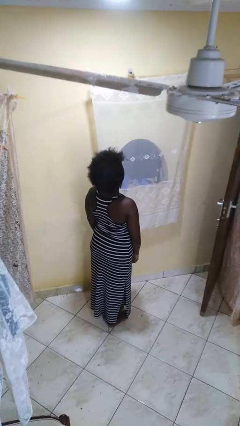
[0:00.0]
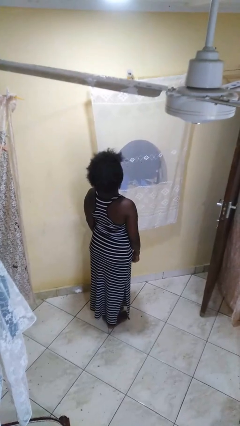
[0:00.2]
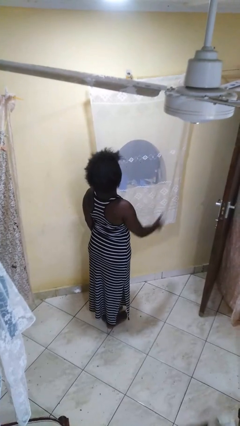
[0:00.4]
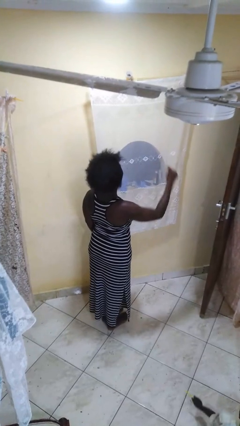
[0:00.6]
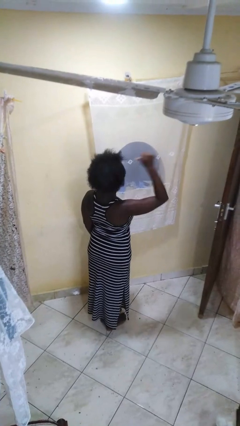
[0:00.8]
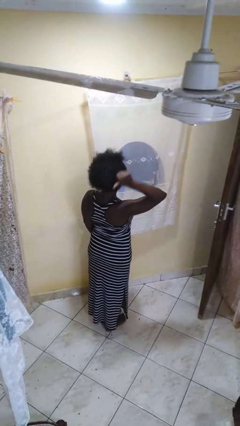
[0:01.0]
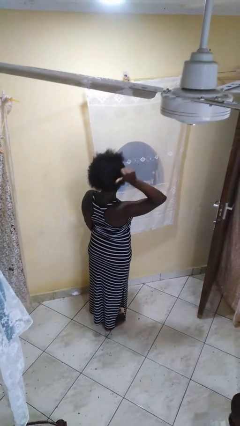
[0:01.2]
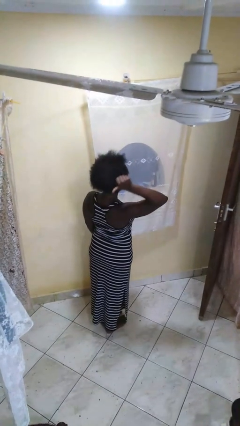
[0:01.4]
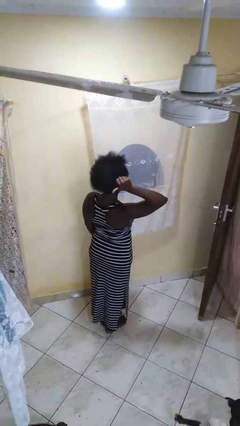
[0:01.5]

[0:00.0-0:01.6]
person gestures behind me

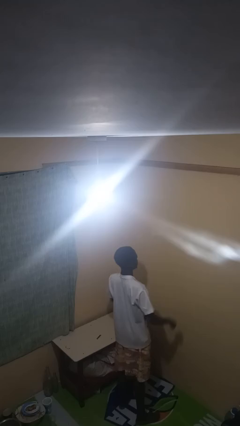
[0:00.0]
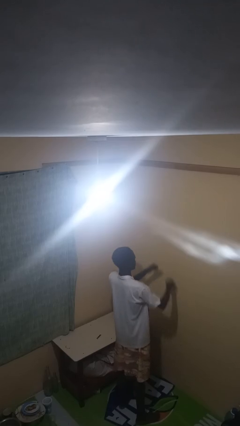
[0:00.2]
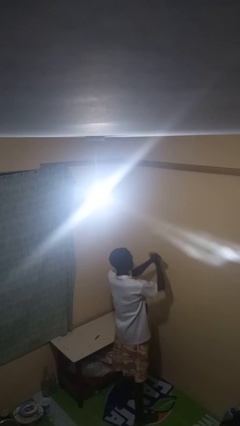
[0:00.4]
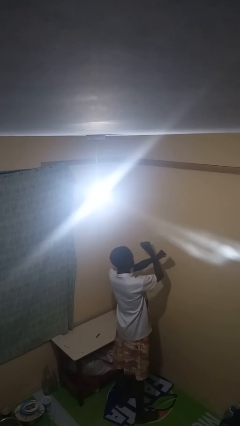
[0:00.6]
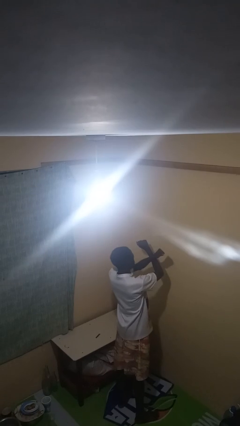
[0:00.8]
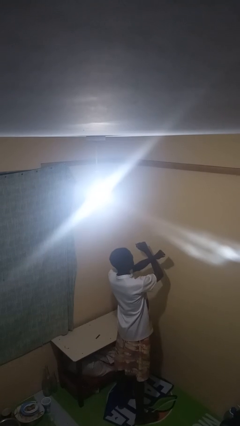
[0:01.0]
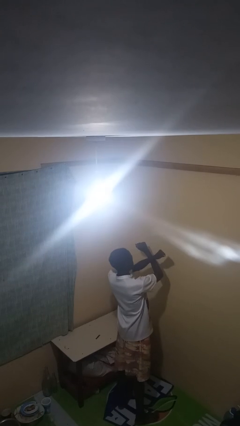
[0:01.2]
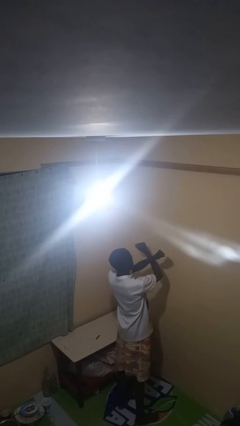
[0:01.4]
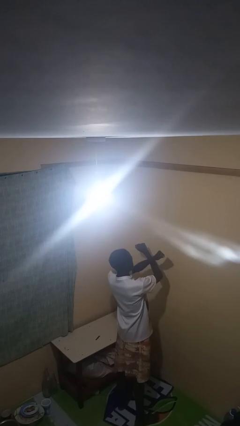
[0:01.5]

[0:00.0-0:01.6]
person gestures arms x

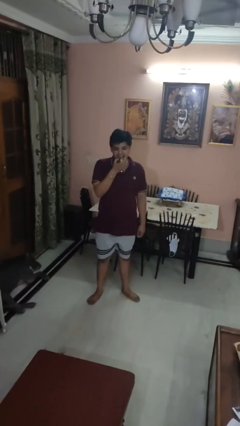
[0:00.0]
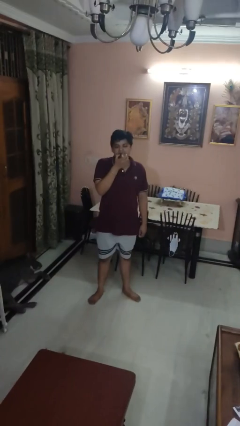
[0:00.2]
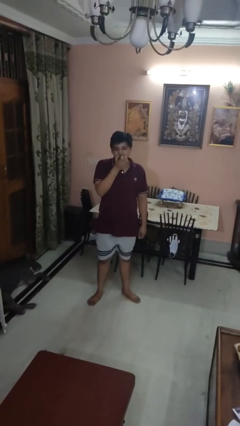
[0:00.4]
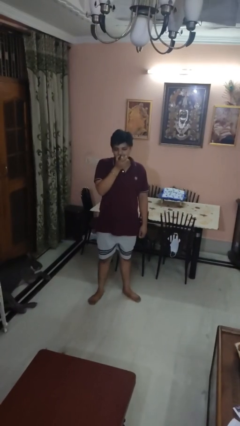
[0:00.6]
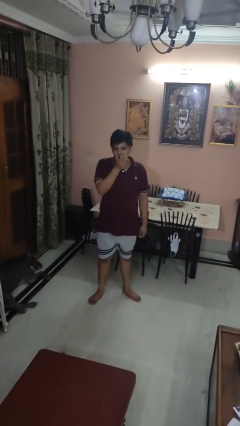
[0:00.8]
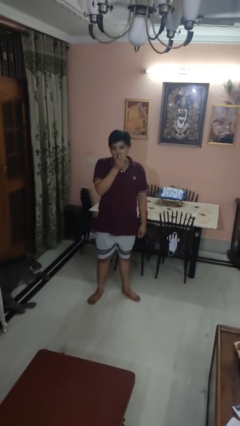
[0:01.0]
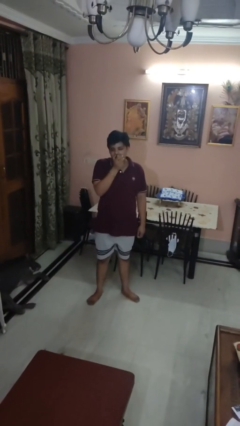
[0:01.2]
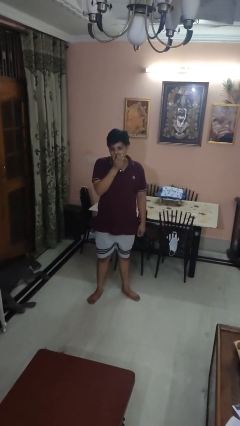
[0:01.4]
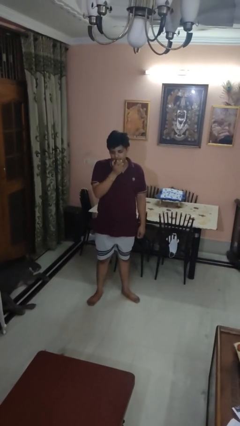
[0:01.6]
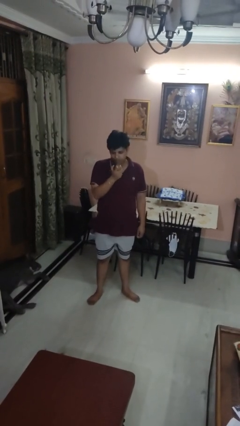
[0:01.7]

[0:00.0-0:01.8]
person eats apple

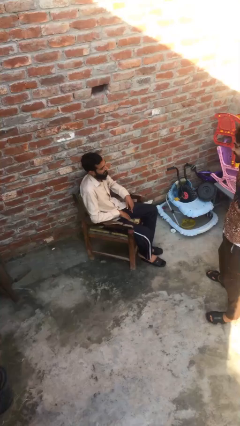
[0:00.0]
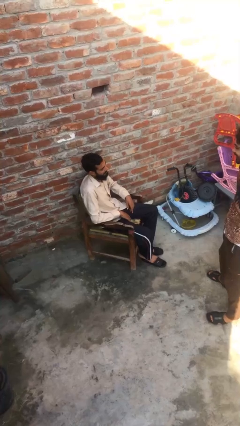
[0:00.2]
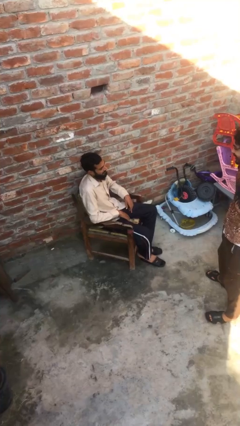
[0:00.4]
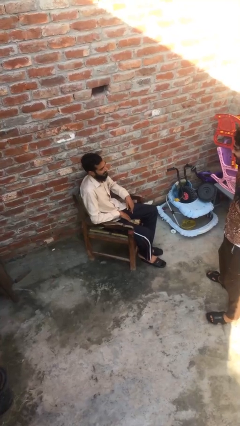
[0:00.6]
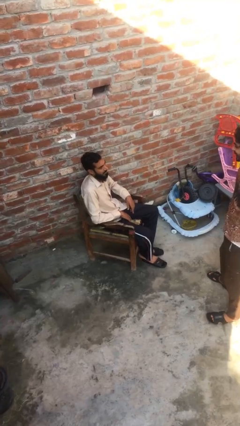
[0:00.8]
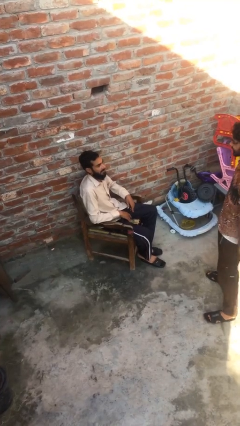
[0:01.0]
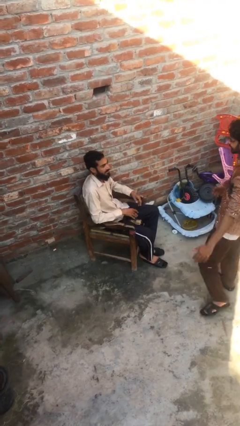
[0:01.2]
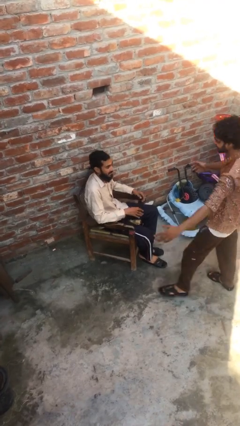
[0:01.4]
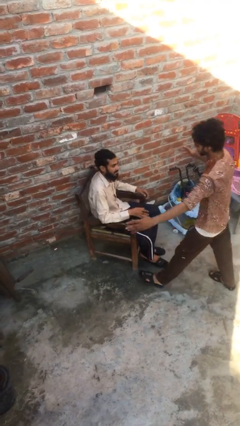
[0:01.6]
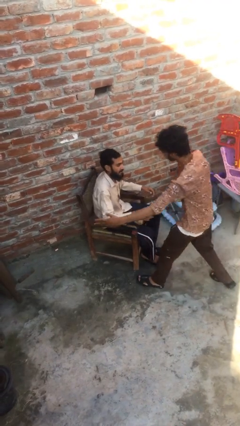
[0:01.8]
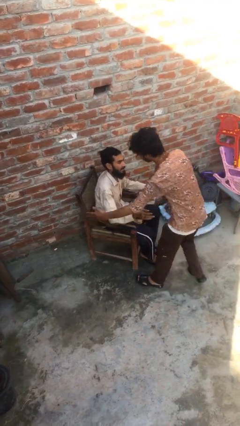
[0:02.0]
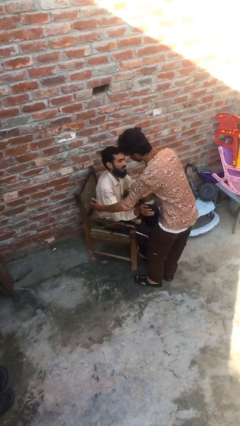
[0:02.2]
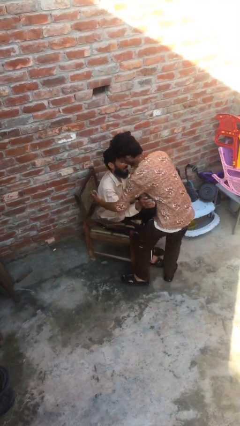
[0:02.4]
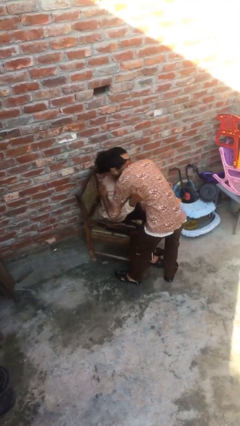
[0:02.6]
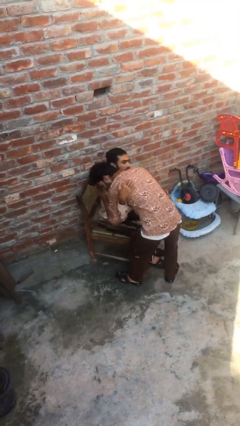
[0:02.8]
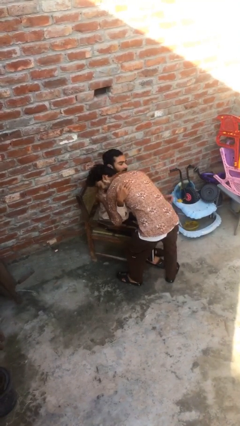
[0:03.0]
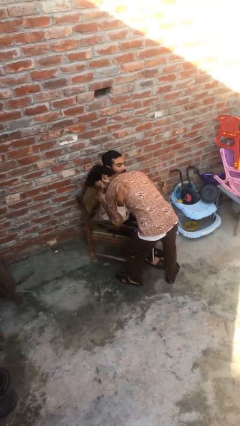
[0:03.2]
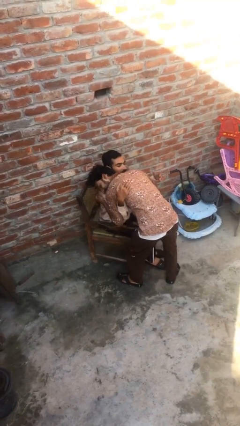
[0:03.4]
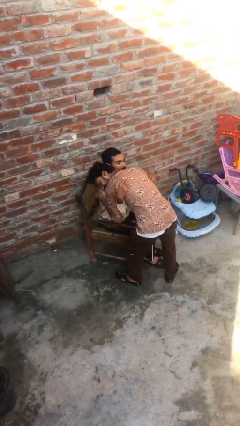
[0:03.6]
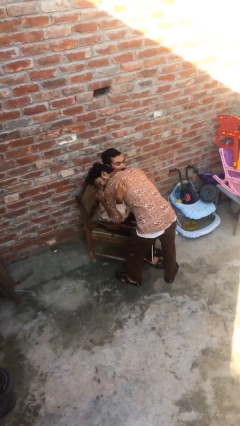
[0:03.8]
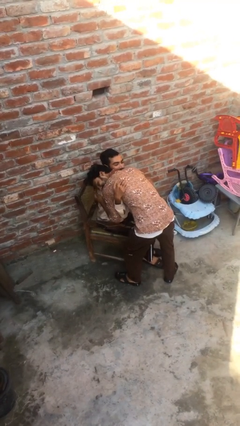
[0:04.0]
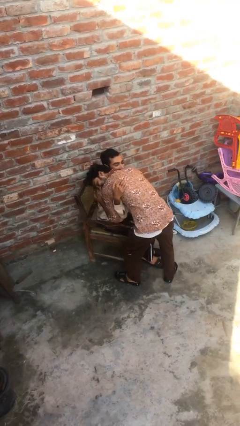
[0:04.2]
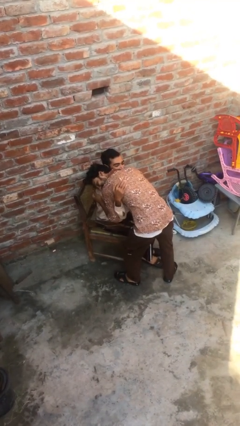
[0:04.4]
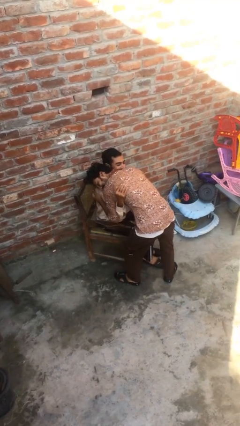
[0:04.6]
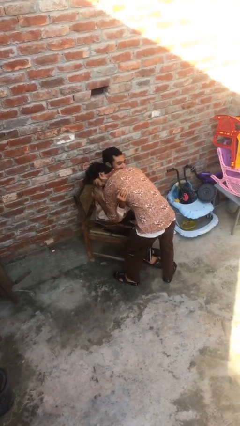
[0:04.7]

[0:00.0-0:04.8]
person embraces person

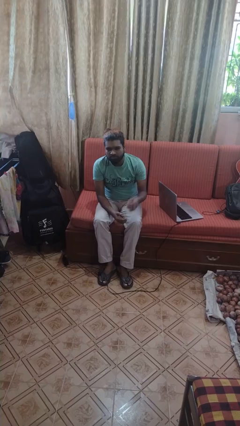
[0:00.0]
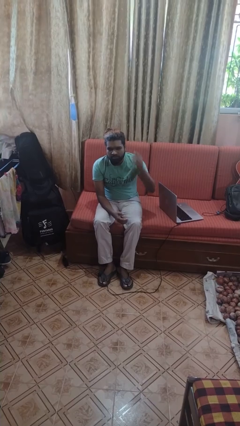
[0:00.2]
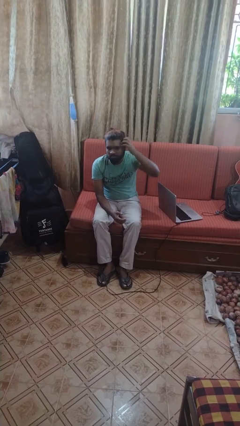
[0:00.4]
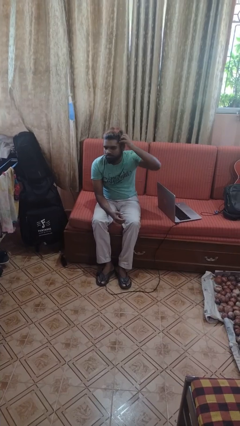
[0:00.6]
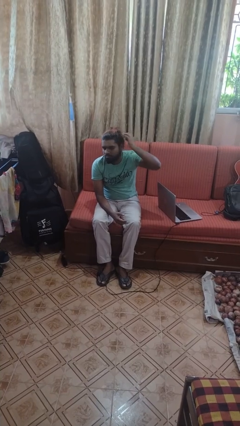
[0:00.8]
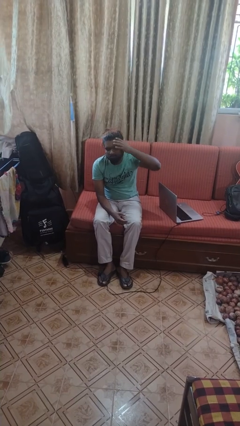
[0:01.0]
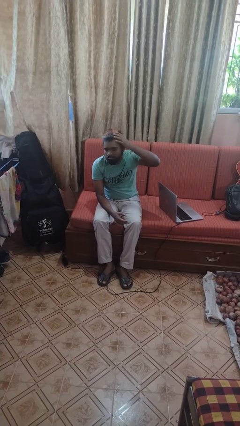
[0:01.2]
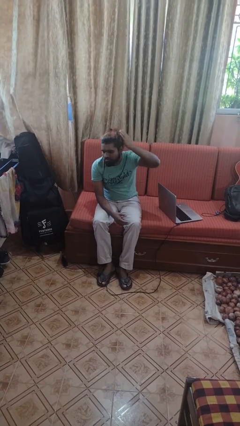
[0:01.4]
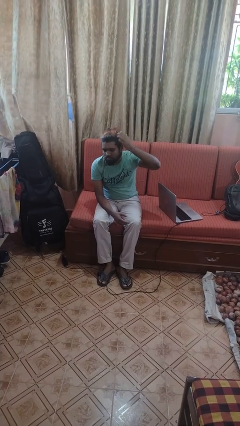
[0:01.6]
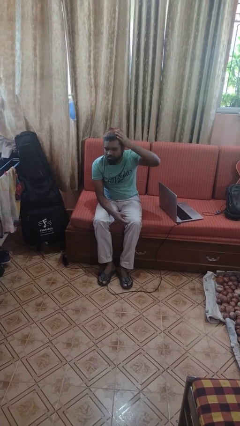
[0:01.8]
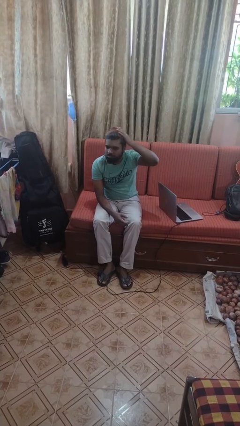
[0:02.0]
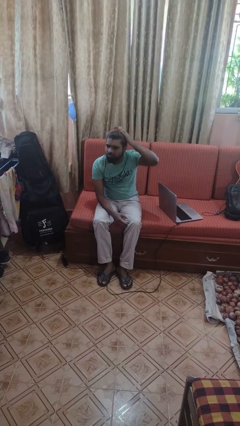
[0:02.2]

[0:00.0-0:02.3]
person strokes hair

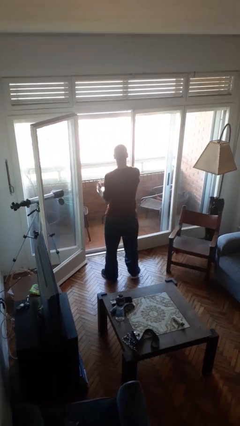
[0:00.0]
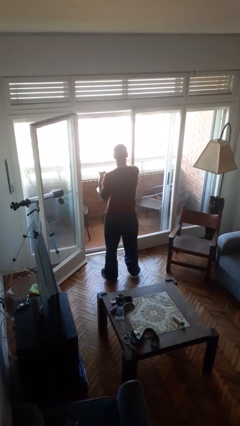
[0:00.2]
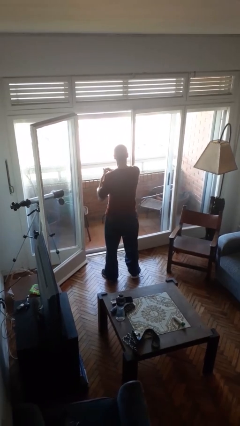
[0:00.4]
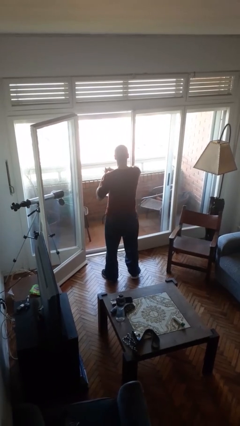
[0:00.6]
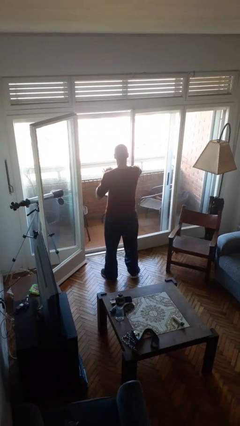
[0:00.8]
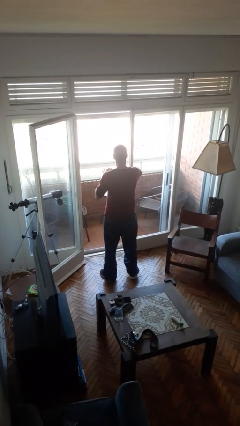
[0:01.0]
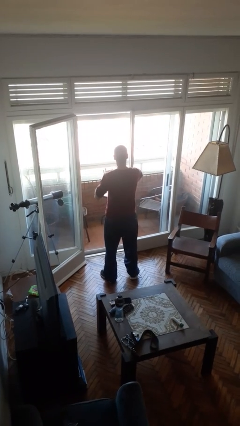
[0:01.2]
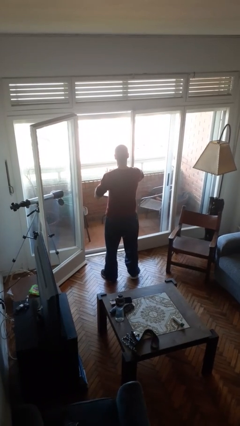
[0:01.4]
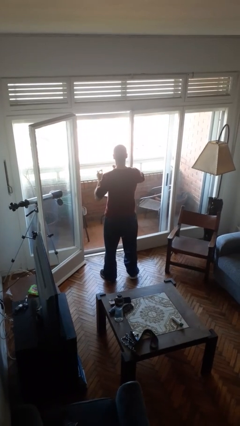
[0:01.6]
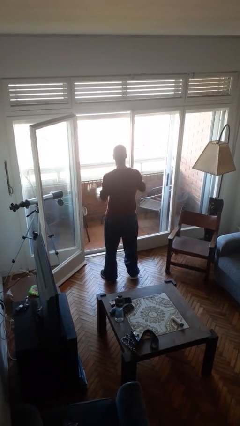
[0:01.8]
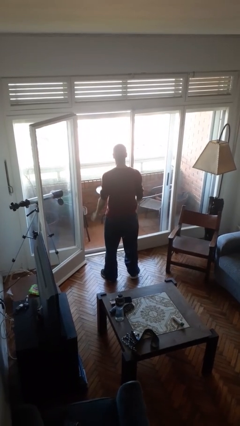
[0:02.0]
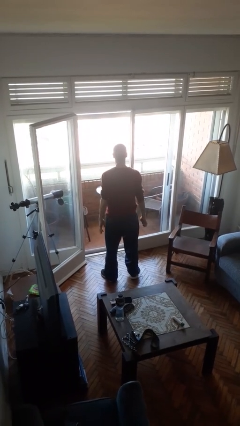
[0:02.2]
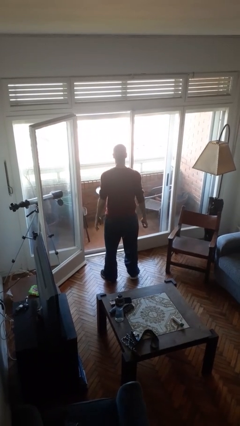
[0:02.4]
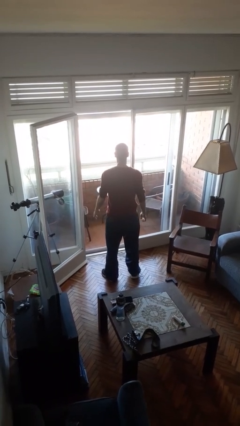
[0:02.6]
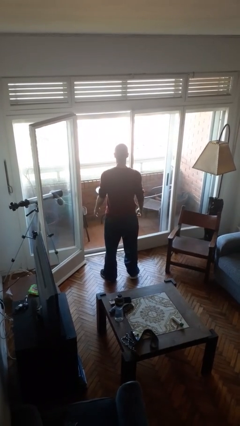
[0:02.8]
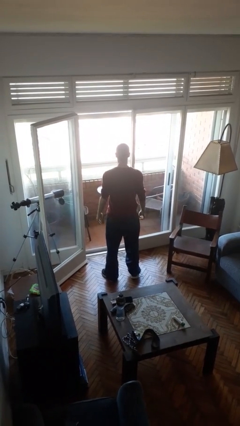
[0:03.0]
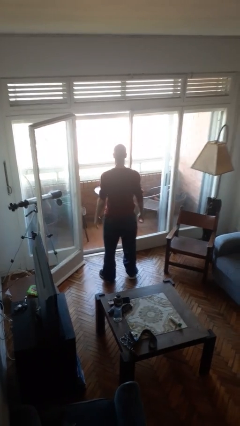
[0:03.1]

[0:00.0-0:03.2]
person takes off ring

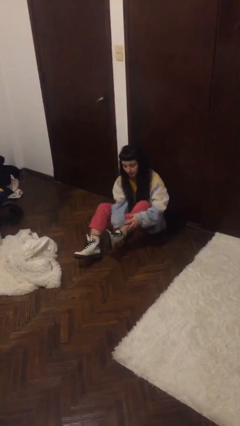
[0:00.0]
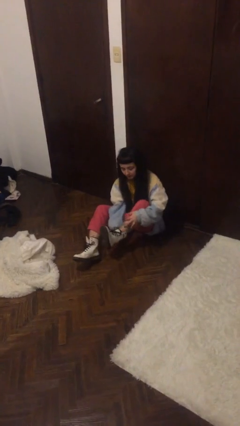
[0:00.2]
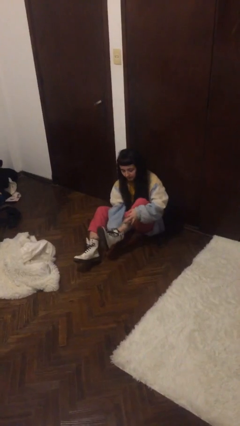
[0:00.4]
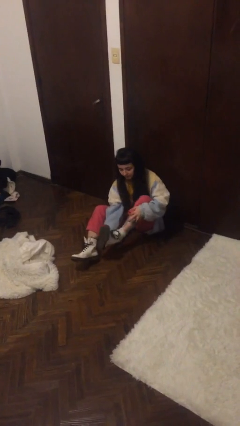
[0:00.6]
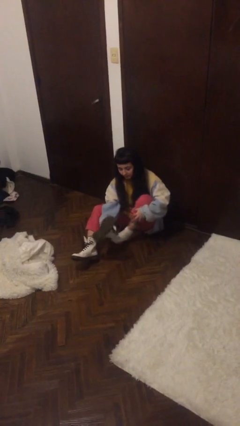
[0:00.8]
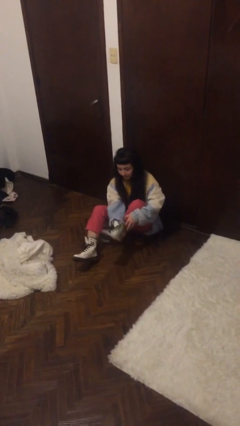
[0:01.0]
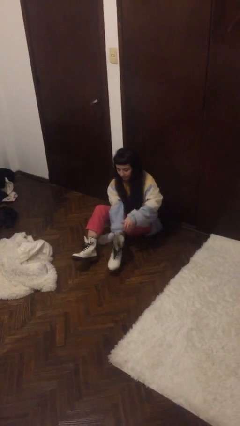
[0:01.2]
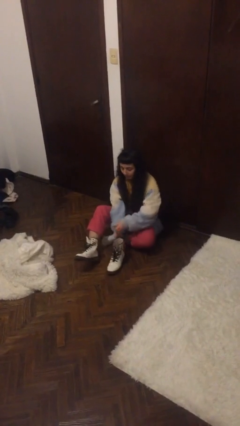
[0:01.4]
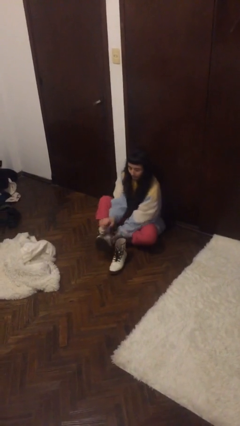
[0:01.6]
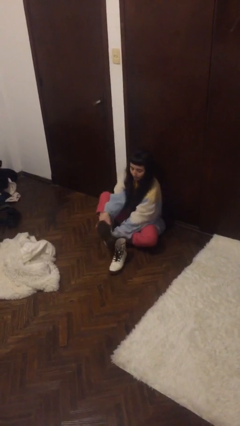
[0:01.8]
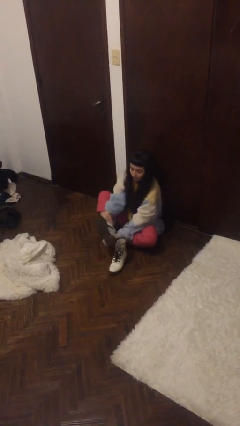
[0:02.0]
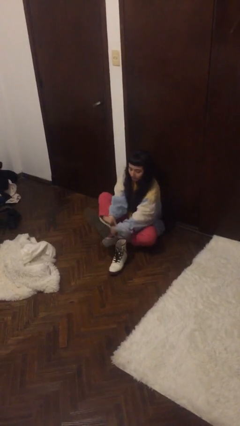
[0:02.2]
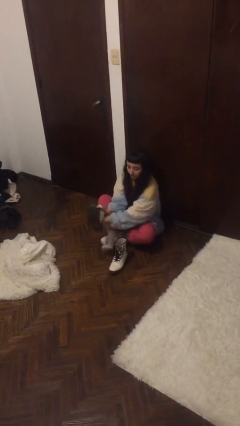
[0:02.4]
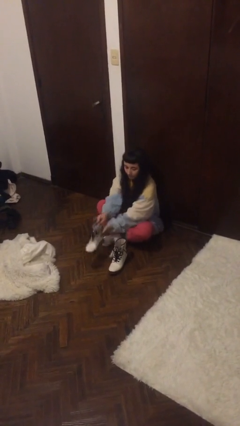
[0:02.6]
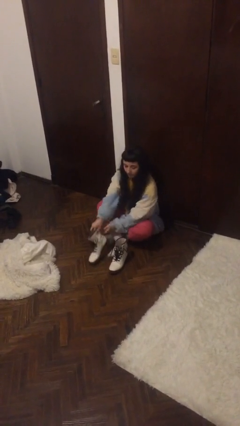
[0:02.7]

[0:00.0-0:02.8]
person takes off boots
